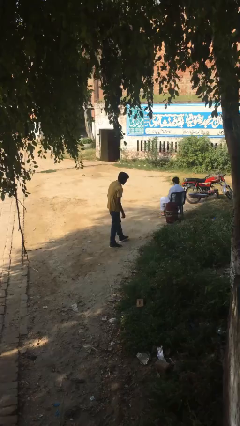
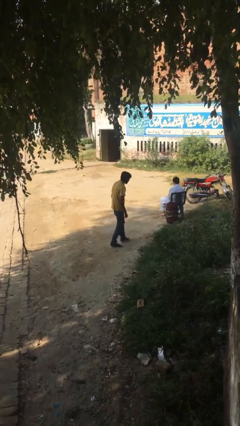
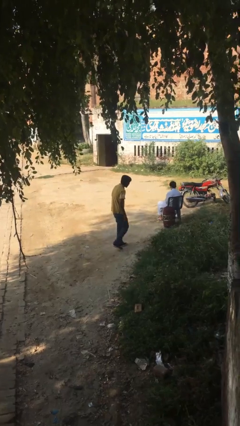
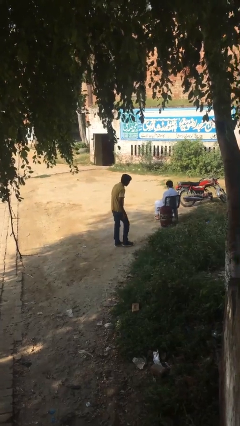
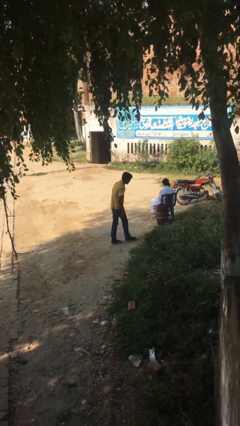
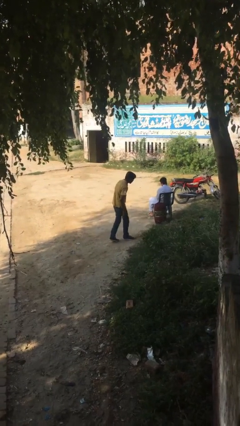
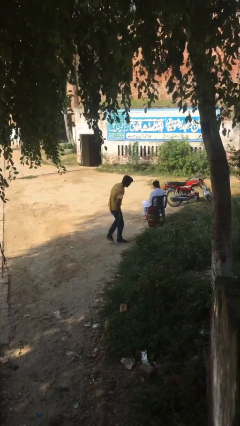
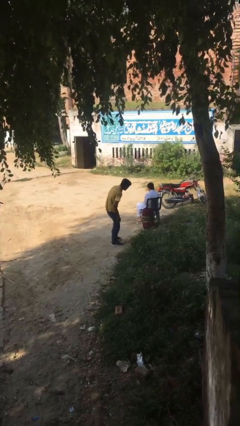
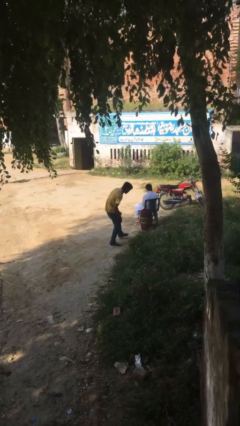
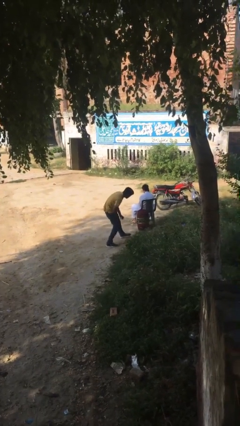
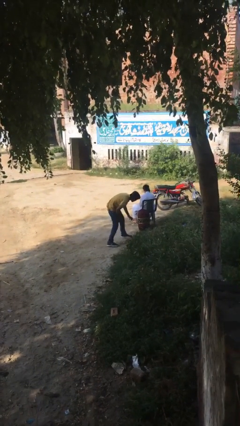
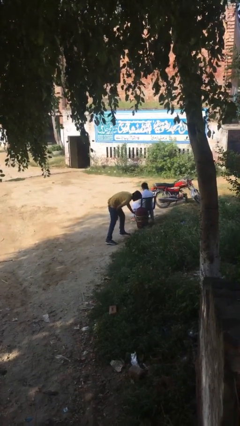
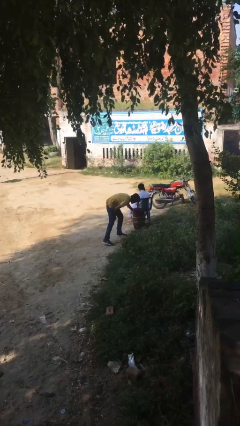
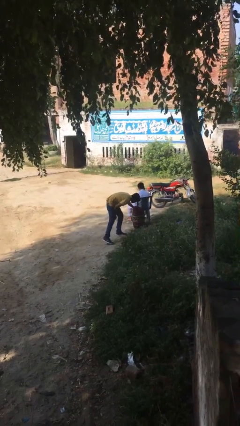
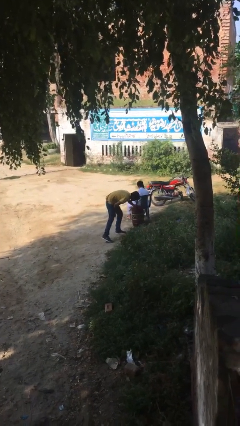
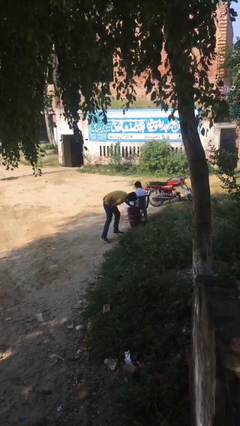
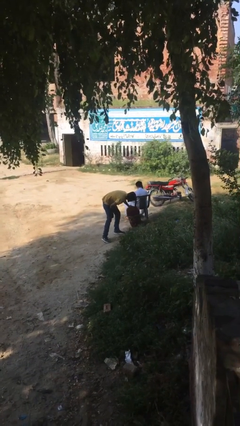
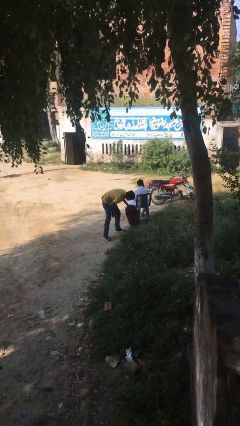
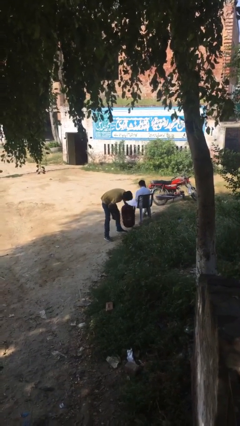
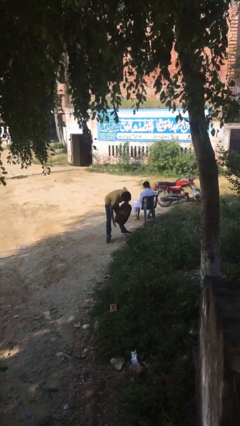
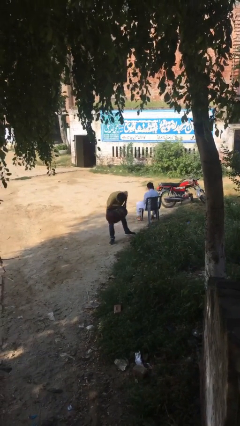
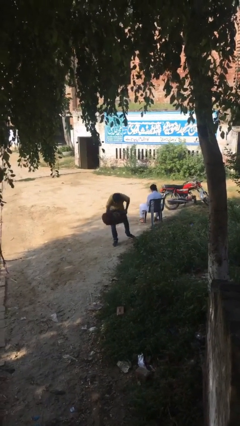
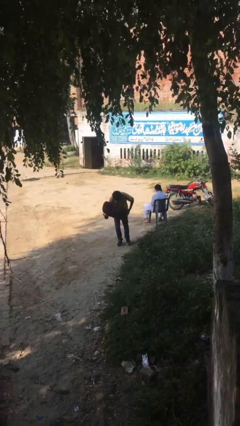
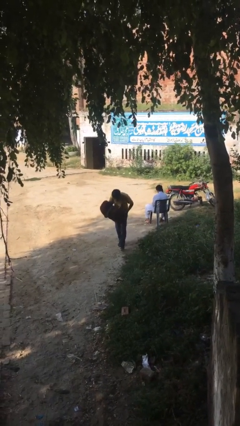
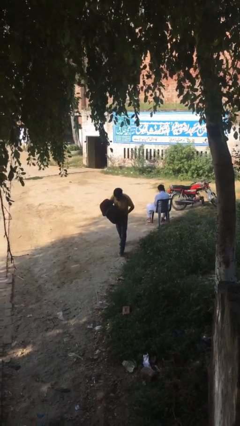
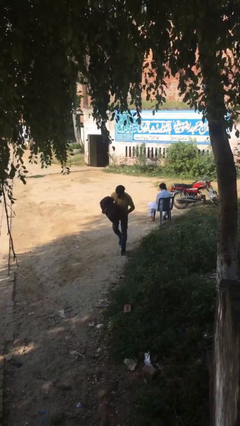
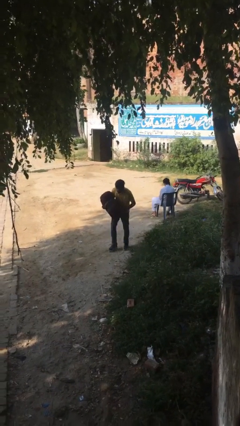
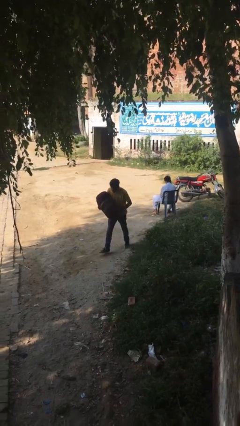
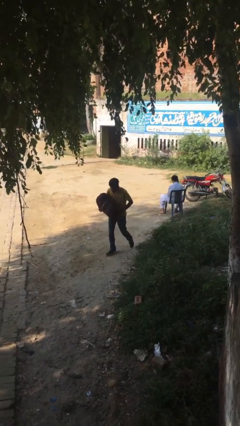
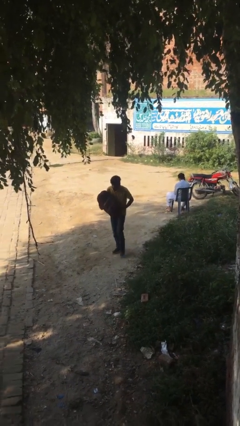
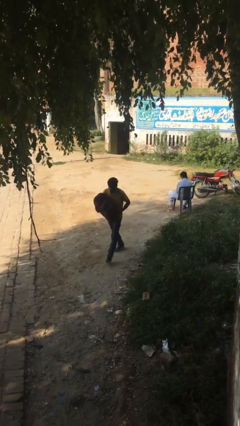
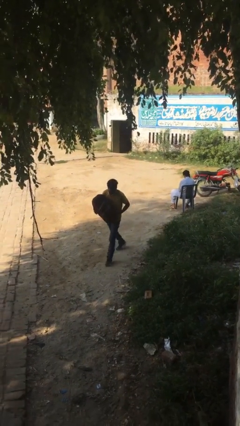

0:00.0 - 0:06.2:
person steals object from person

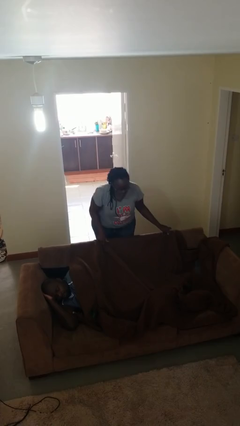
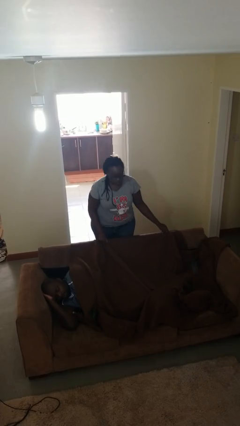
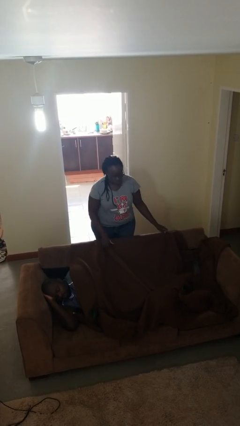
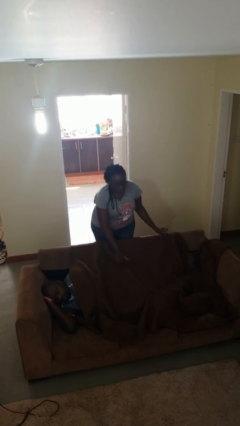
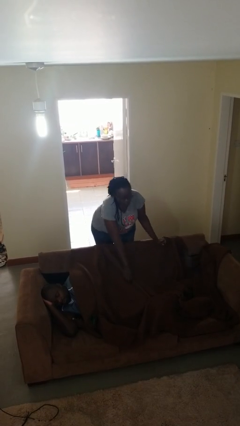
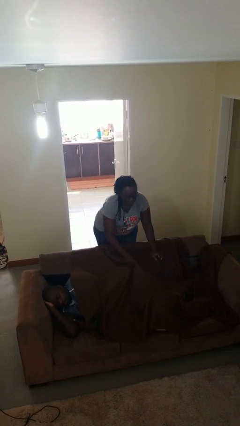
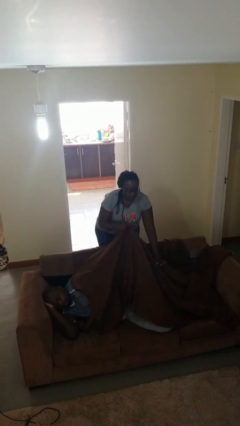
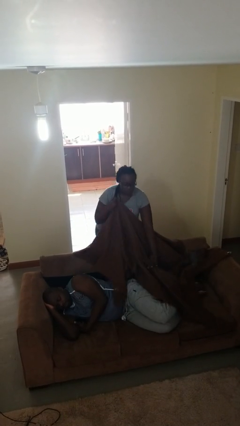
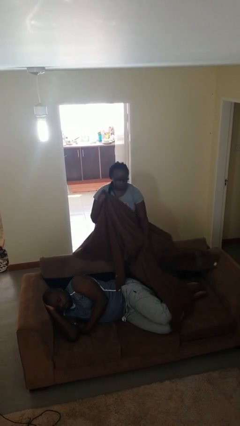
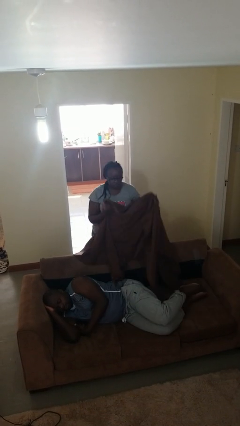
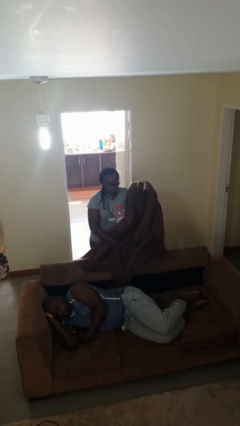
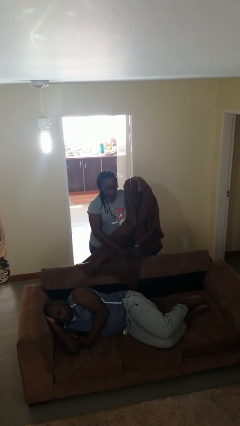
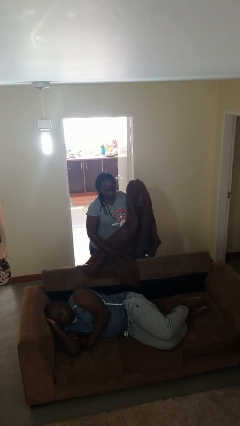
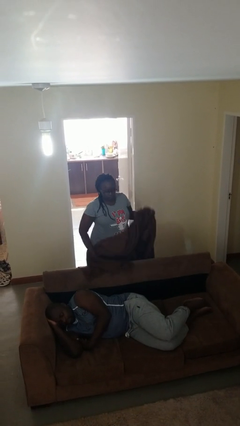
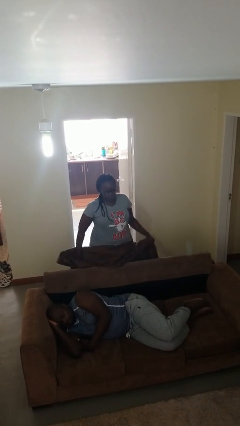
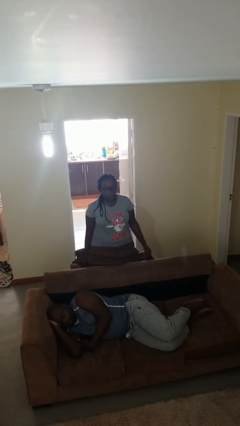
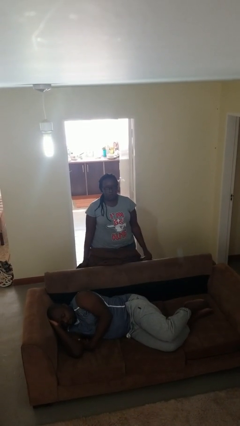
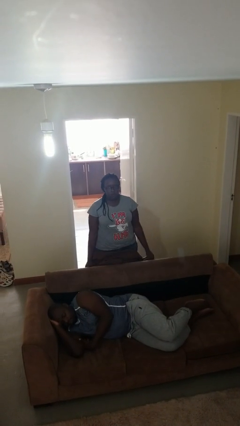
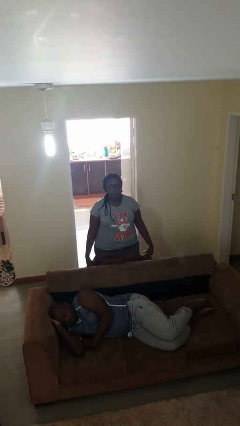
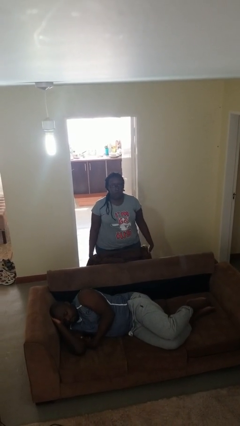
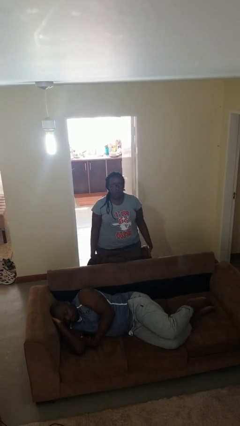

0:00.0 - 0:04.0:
person uncovers friend with blanket

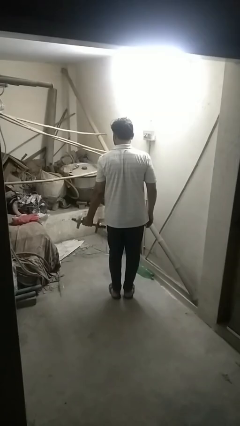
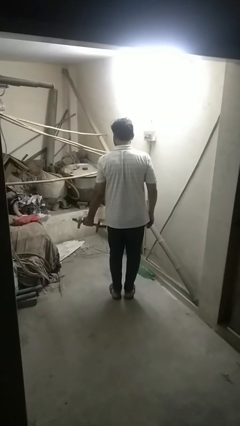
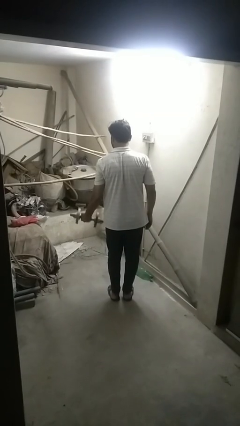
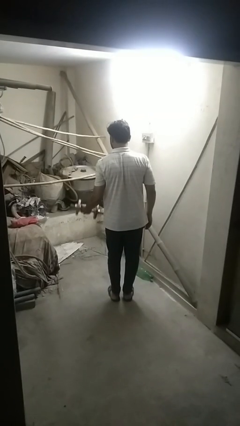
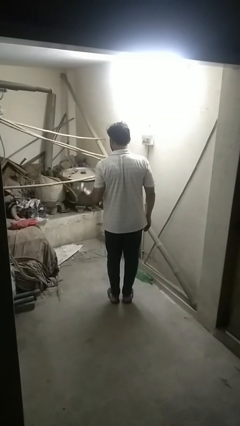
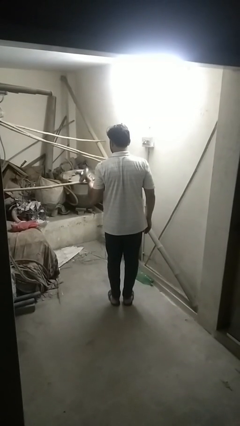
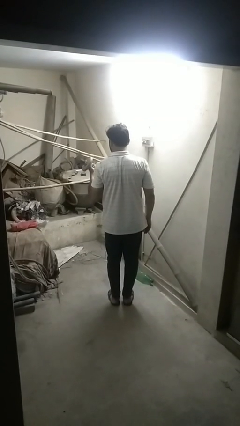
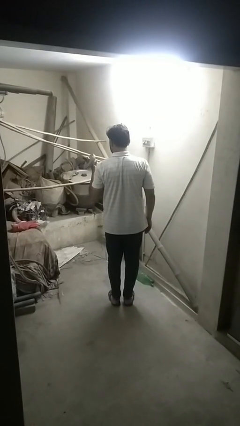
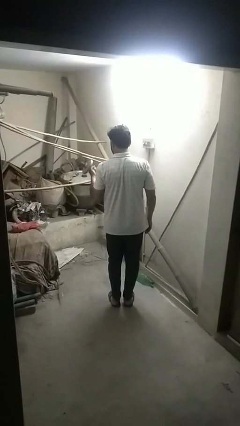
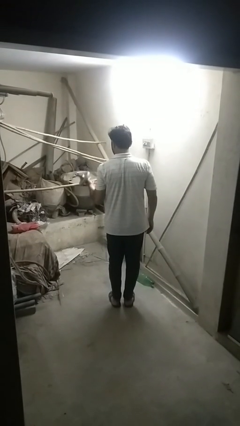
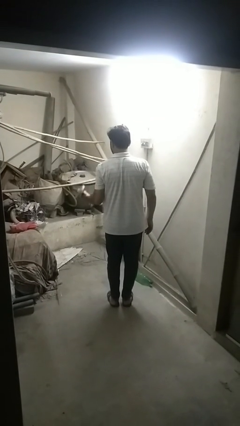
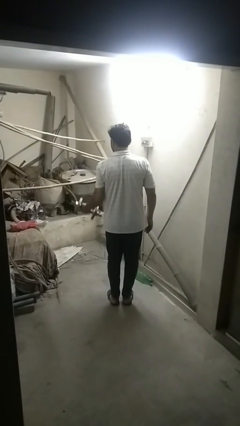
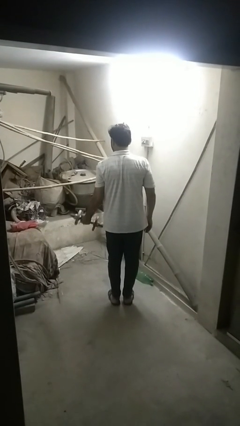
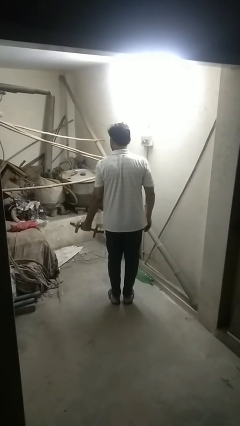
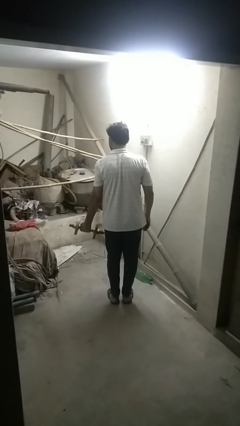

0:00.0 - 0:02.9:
person lifts dumbbells

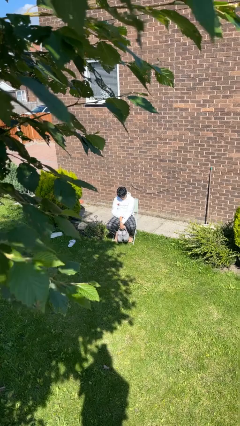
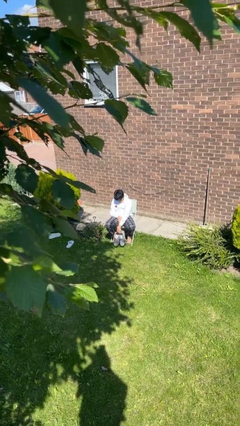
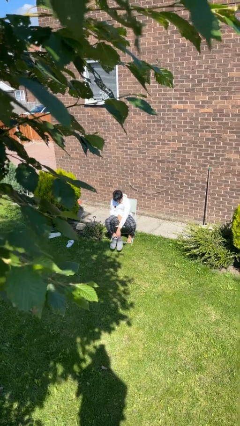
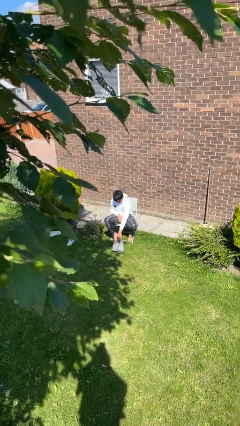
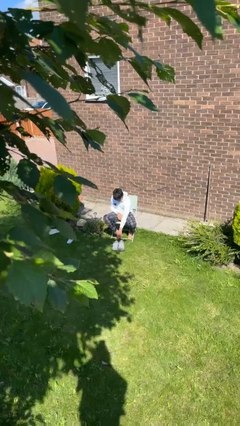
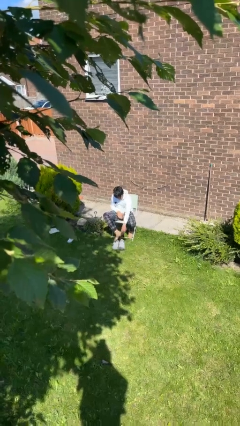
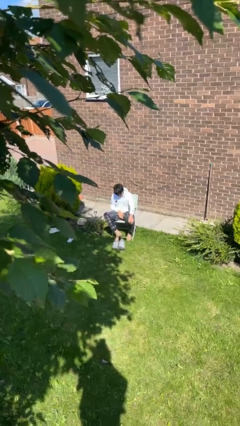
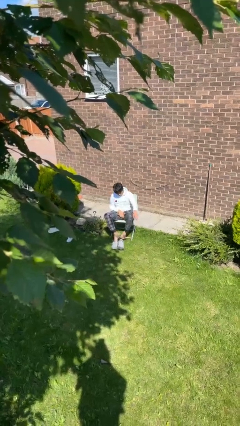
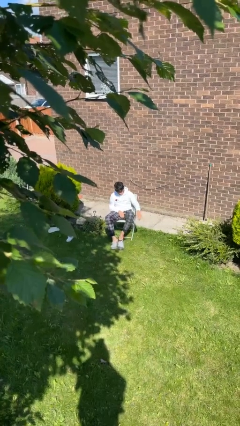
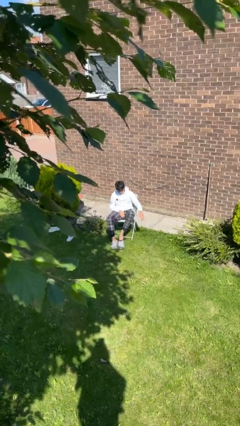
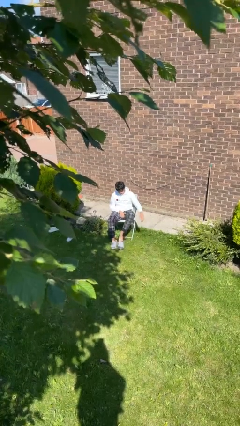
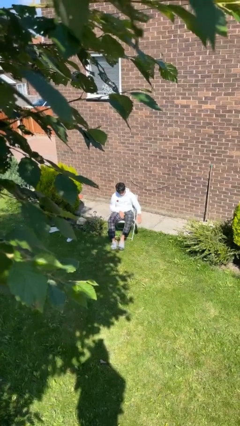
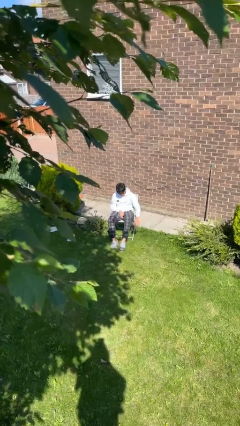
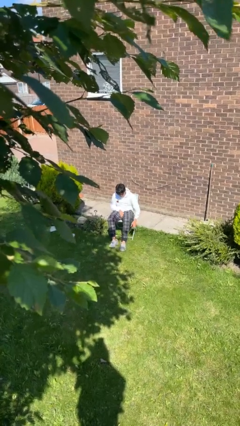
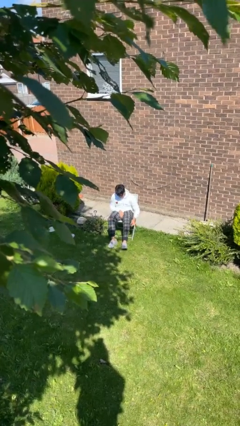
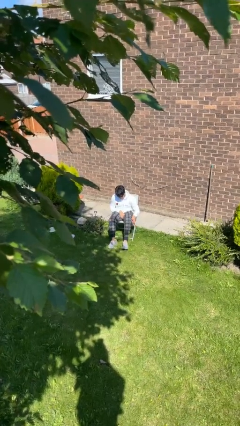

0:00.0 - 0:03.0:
person puts on shoes

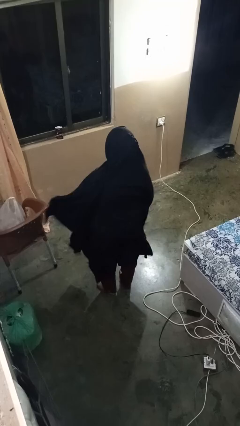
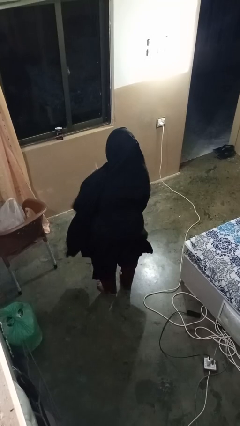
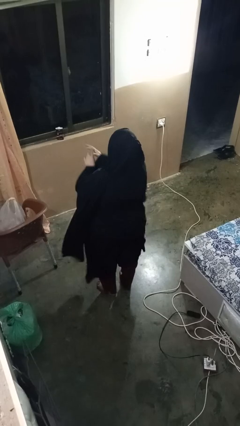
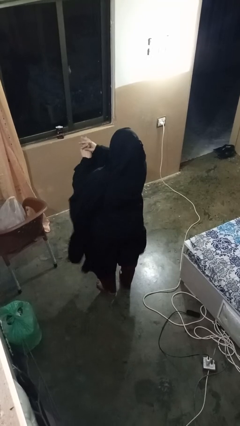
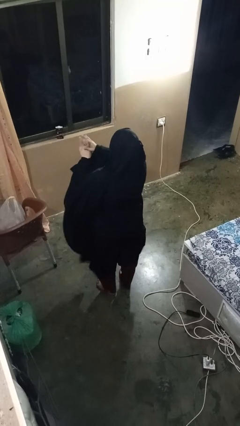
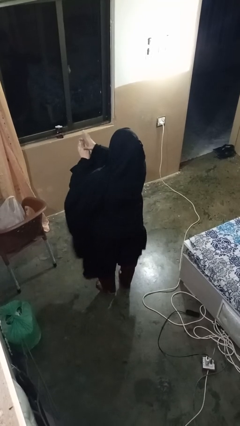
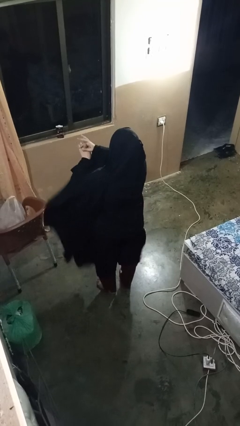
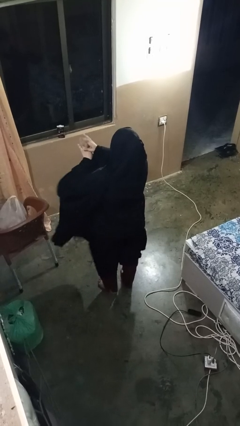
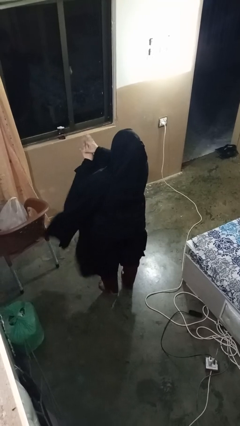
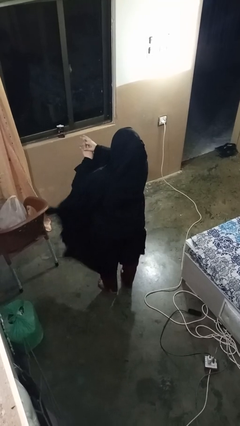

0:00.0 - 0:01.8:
person cracks knuckles
